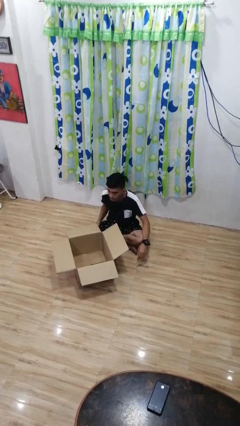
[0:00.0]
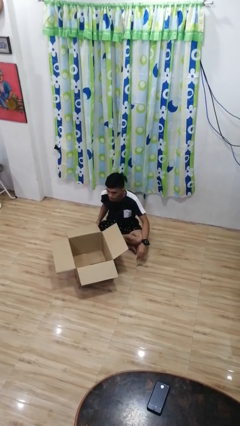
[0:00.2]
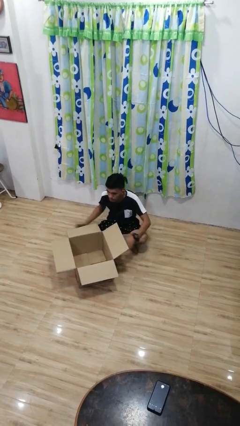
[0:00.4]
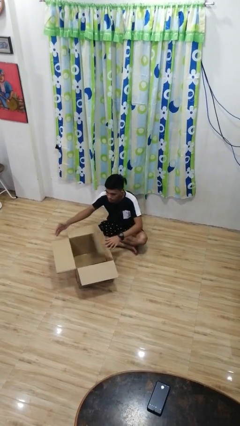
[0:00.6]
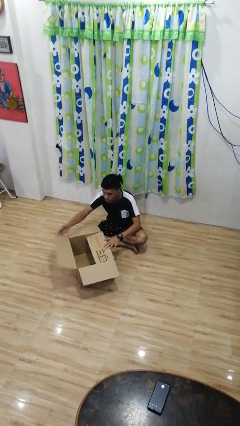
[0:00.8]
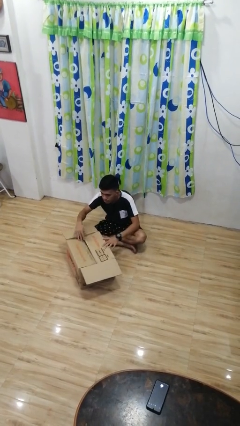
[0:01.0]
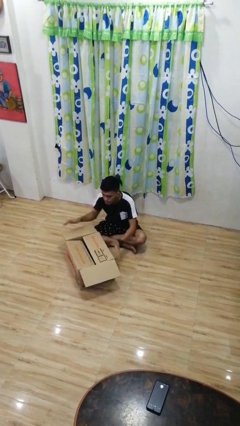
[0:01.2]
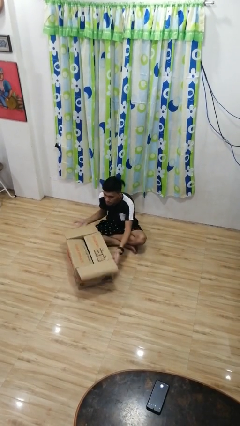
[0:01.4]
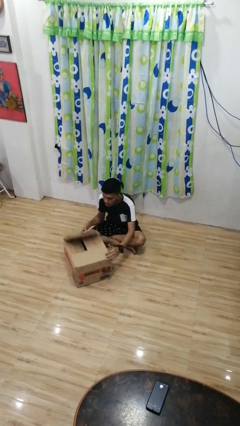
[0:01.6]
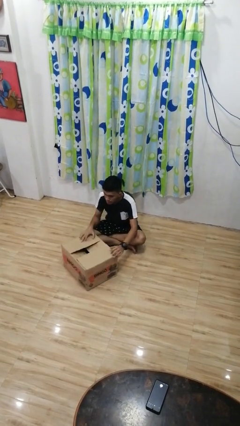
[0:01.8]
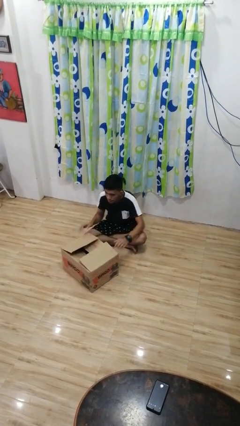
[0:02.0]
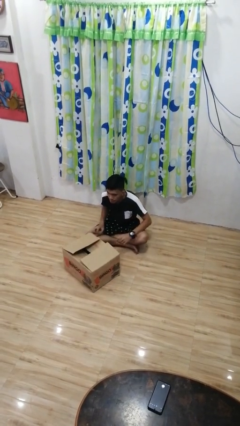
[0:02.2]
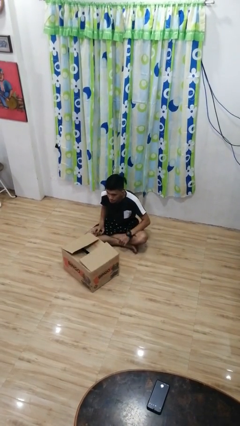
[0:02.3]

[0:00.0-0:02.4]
person closes box

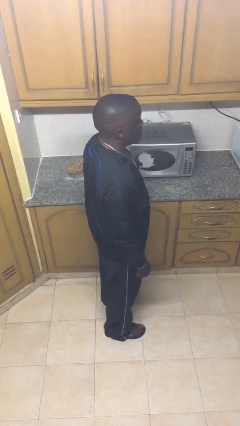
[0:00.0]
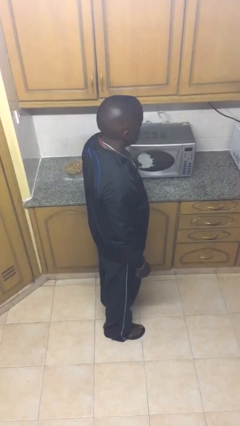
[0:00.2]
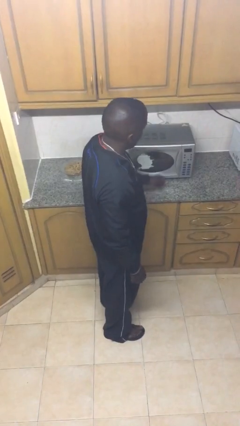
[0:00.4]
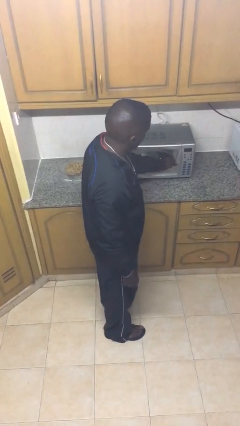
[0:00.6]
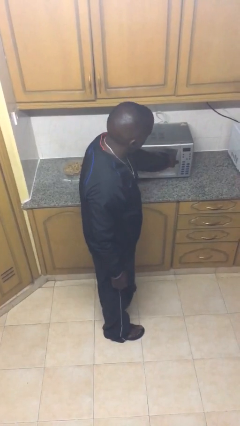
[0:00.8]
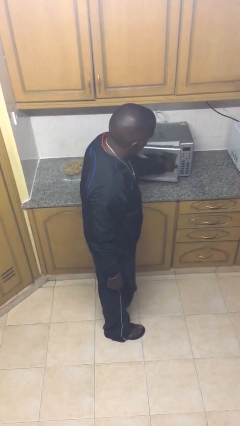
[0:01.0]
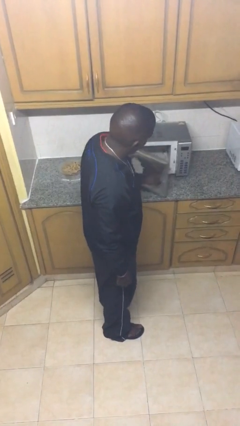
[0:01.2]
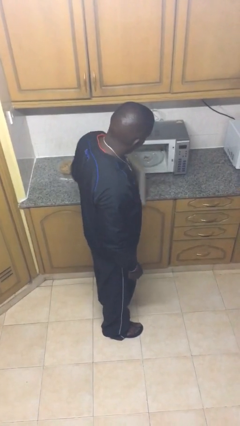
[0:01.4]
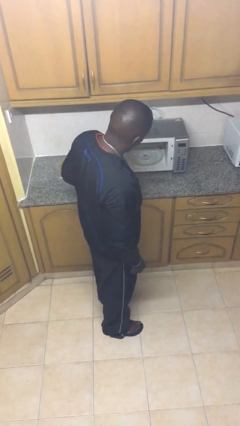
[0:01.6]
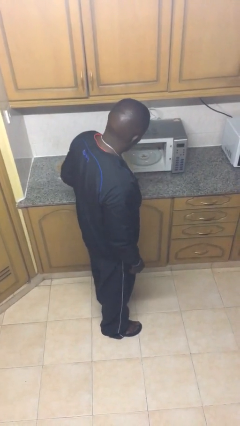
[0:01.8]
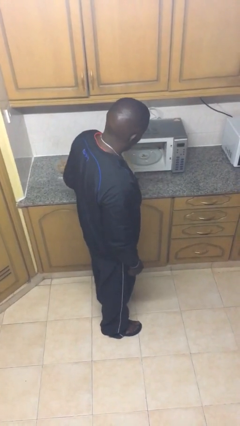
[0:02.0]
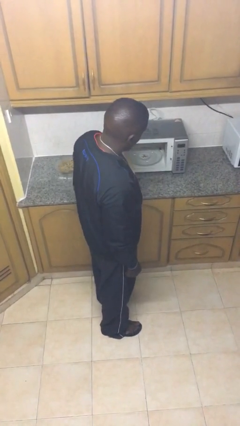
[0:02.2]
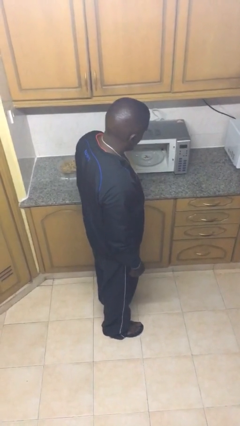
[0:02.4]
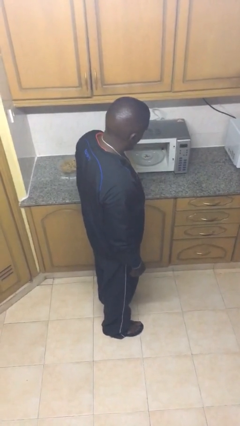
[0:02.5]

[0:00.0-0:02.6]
person opens microwave

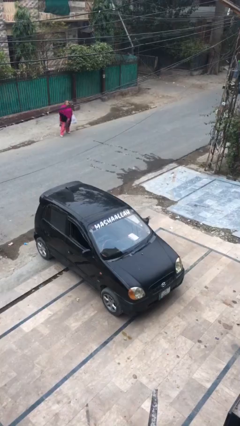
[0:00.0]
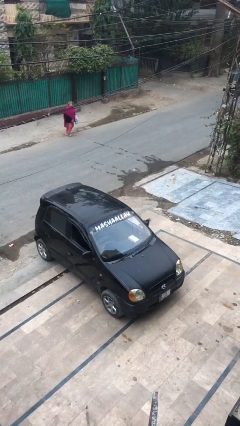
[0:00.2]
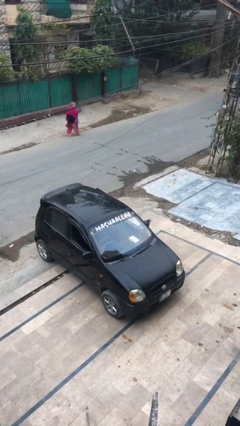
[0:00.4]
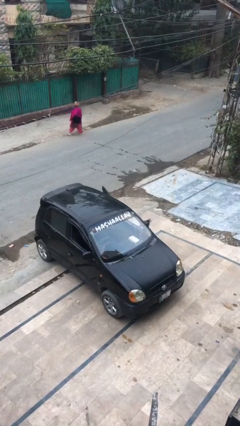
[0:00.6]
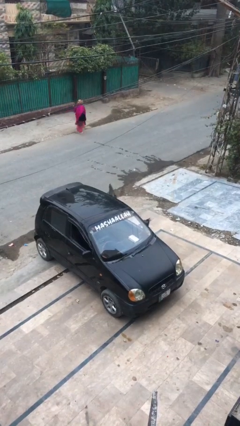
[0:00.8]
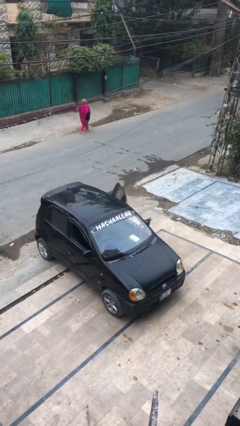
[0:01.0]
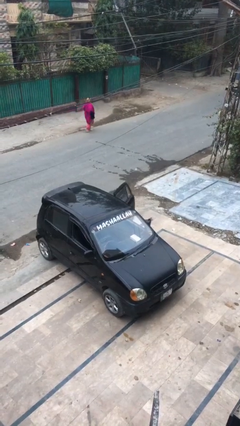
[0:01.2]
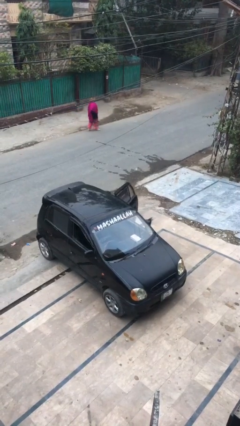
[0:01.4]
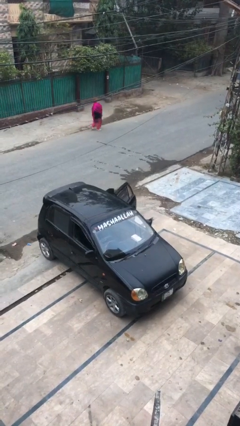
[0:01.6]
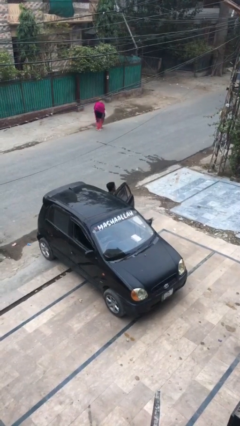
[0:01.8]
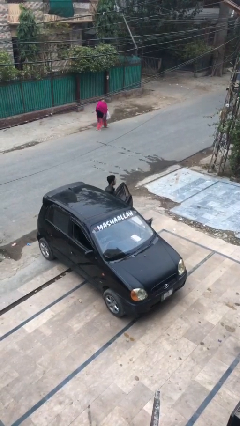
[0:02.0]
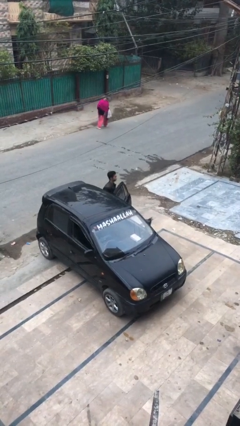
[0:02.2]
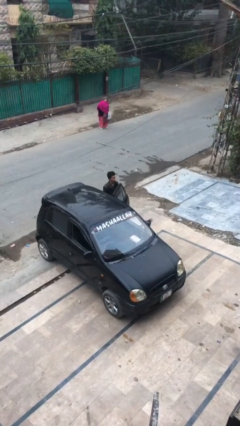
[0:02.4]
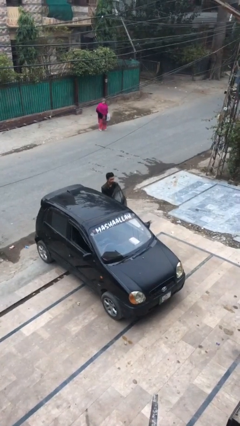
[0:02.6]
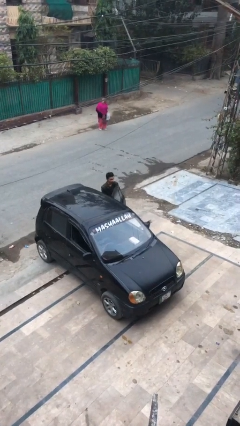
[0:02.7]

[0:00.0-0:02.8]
person exits car

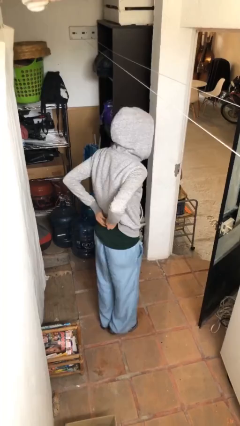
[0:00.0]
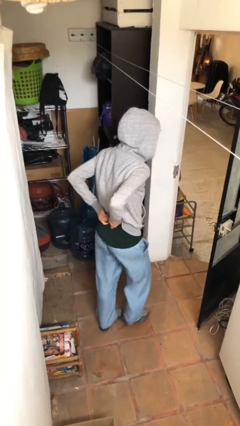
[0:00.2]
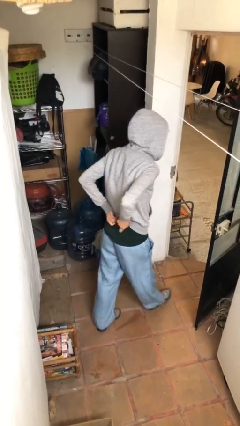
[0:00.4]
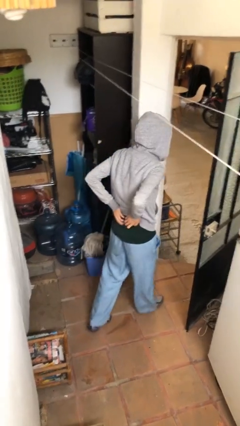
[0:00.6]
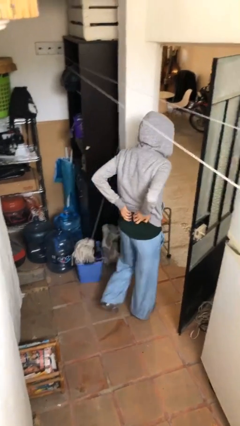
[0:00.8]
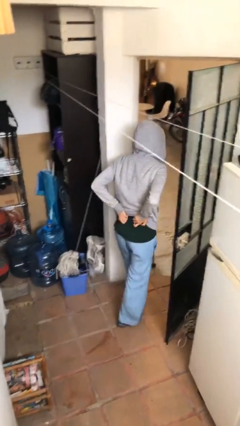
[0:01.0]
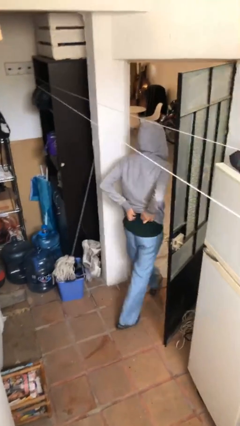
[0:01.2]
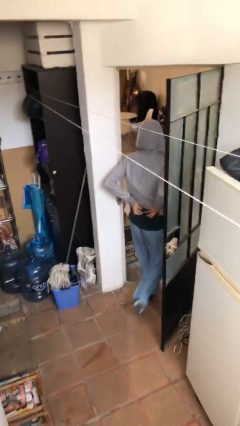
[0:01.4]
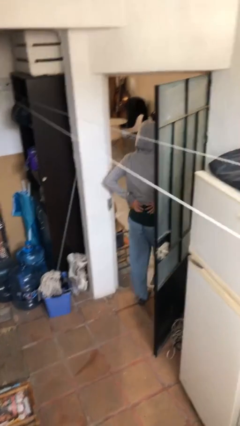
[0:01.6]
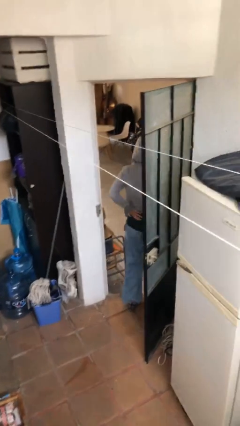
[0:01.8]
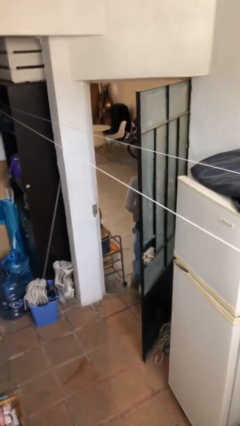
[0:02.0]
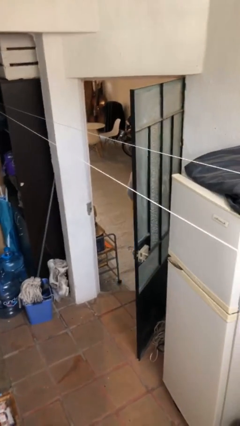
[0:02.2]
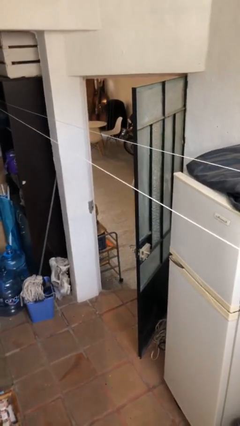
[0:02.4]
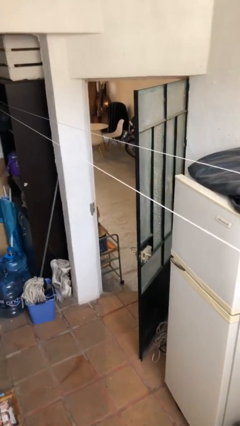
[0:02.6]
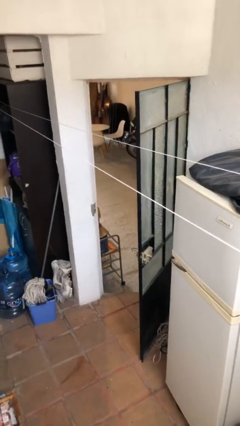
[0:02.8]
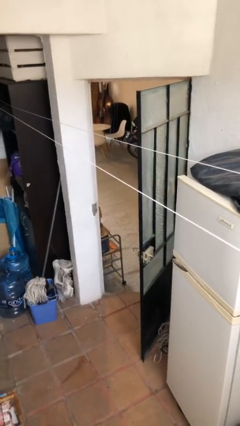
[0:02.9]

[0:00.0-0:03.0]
person exits scene through structure

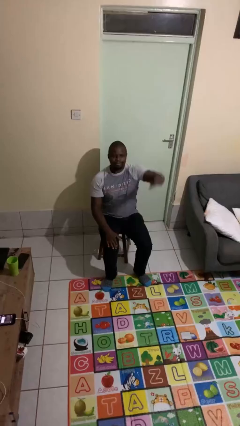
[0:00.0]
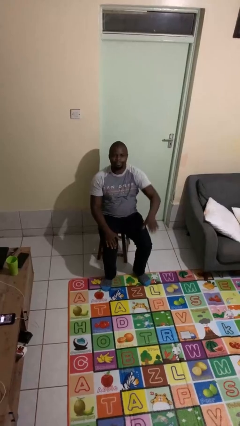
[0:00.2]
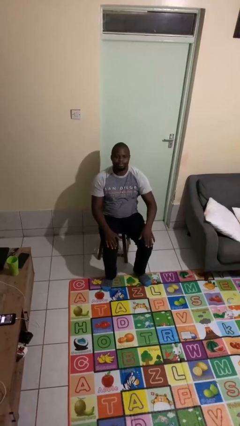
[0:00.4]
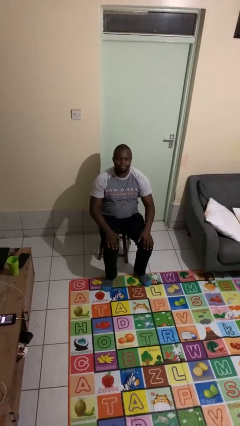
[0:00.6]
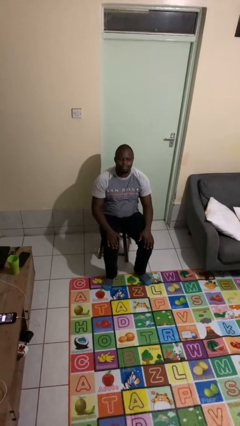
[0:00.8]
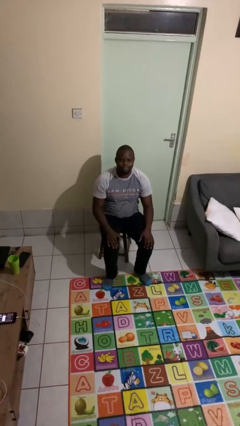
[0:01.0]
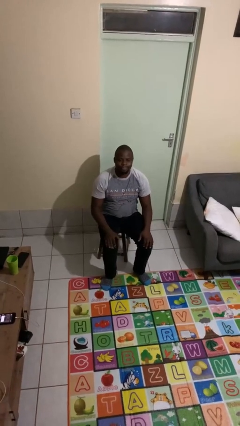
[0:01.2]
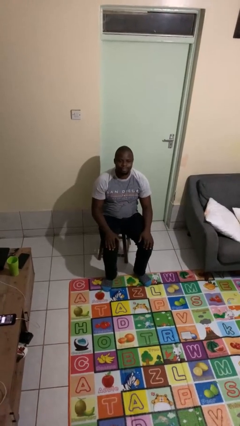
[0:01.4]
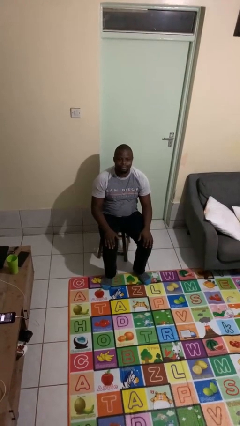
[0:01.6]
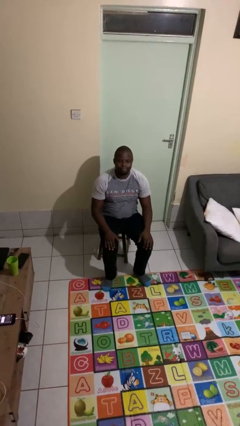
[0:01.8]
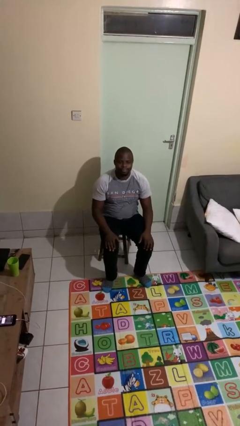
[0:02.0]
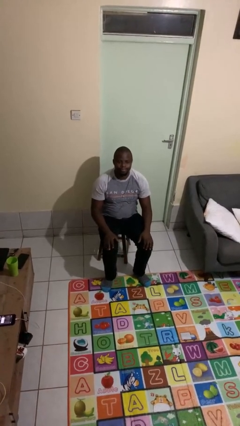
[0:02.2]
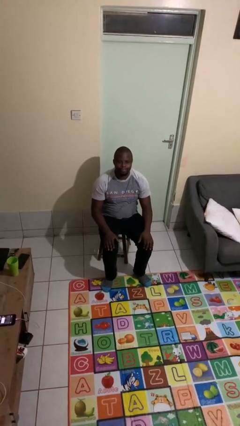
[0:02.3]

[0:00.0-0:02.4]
person gestures lower hand

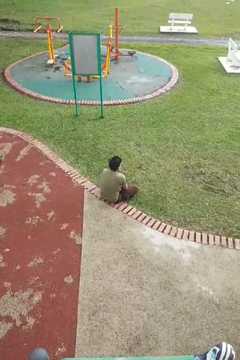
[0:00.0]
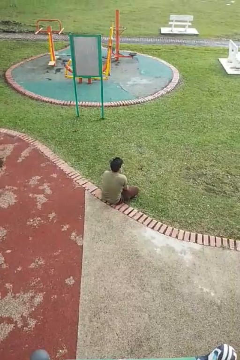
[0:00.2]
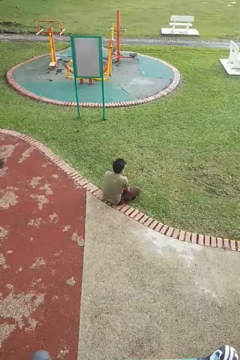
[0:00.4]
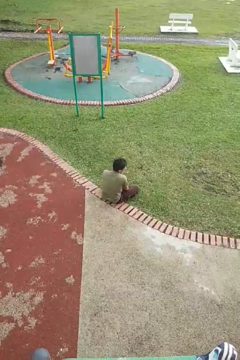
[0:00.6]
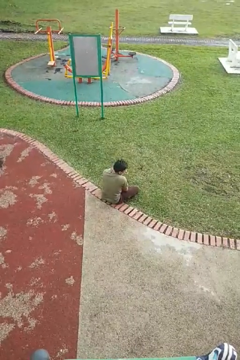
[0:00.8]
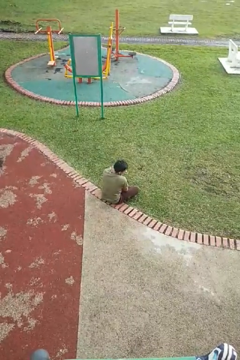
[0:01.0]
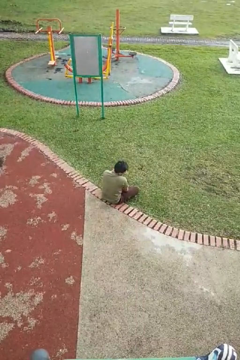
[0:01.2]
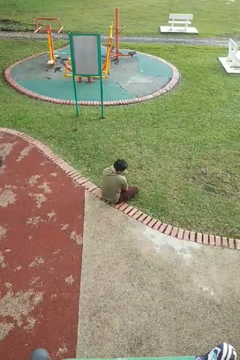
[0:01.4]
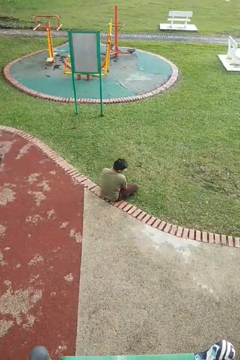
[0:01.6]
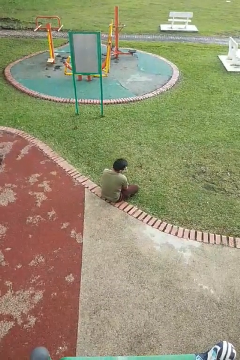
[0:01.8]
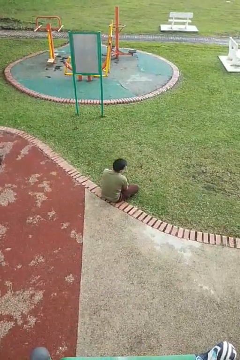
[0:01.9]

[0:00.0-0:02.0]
person rubs neck

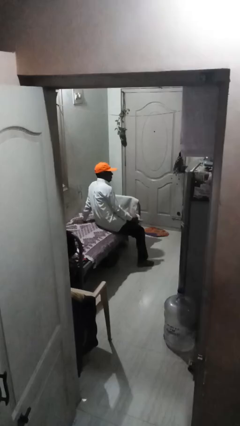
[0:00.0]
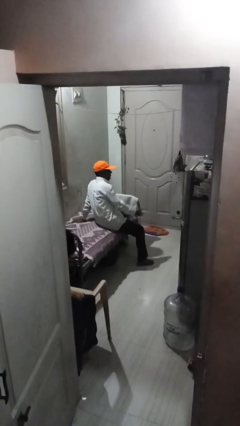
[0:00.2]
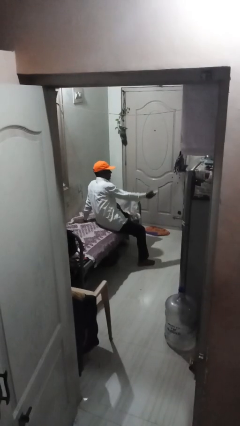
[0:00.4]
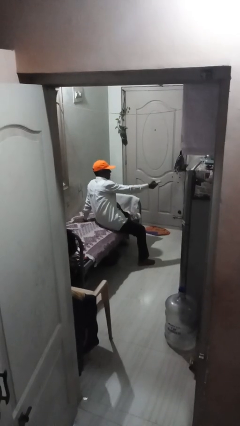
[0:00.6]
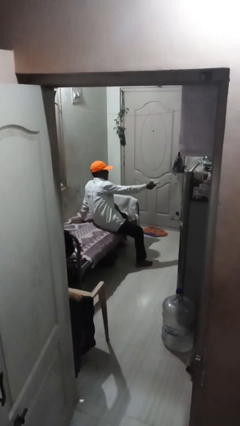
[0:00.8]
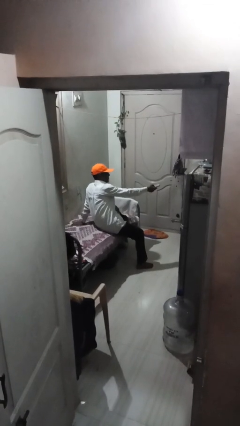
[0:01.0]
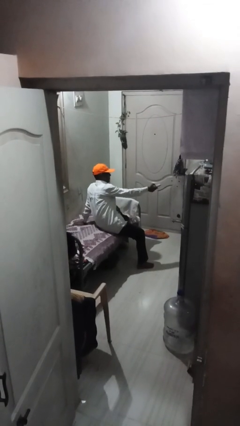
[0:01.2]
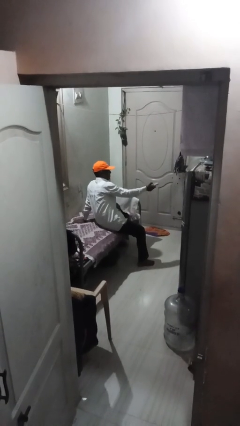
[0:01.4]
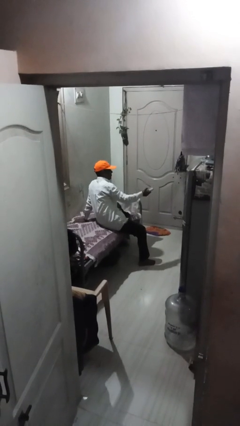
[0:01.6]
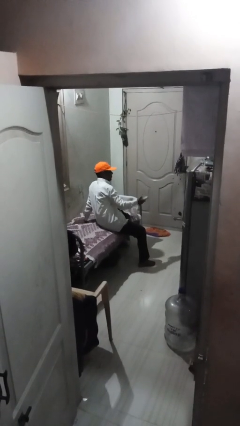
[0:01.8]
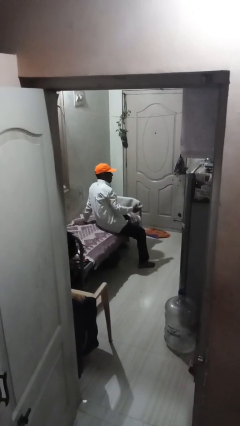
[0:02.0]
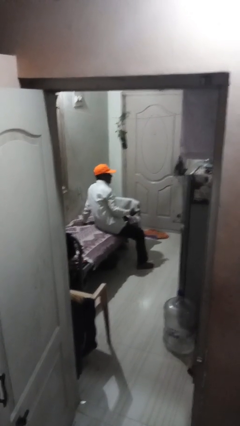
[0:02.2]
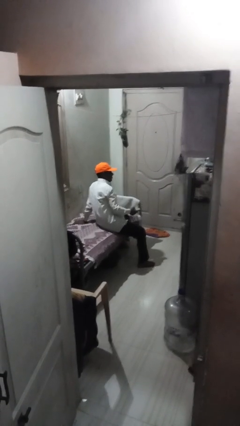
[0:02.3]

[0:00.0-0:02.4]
person uses television remote
